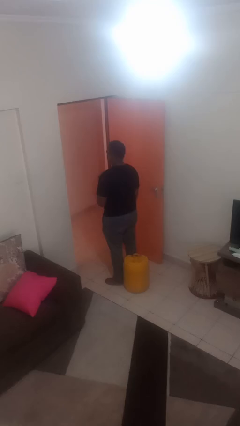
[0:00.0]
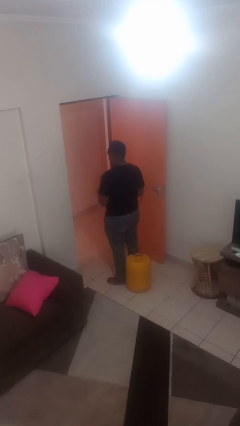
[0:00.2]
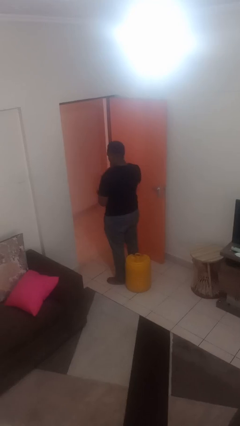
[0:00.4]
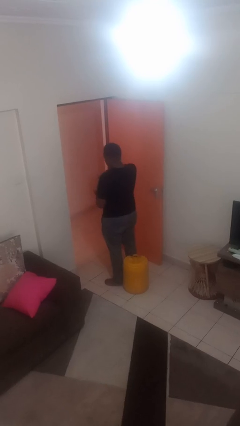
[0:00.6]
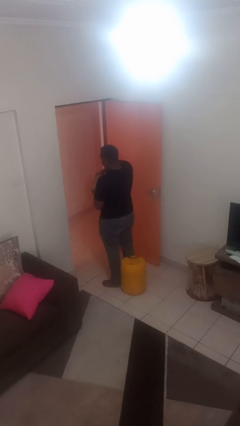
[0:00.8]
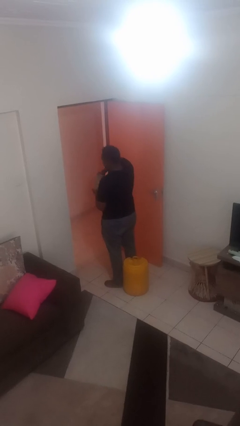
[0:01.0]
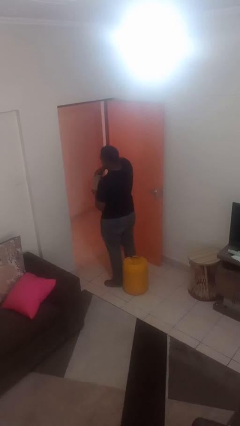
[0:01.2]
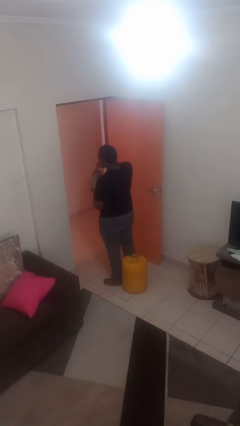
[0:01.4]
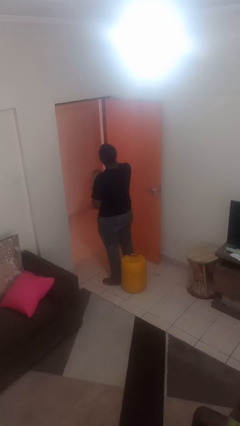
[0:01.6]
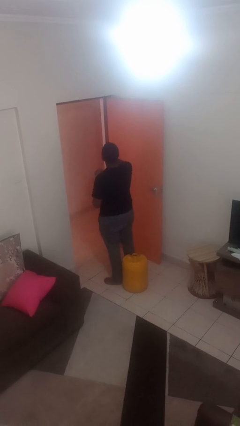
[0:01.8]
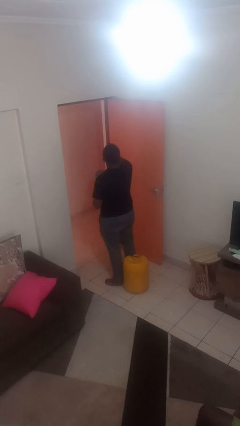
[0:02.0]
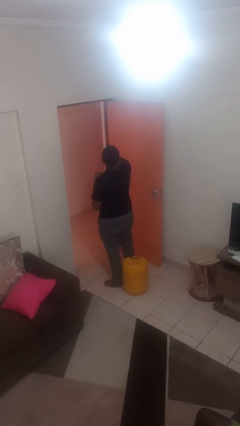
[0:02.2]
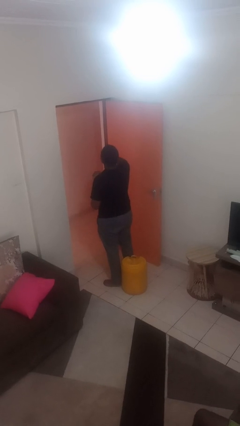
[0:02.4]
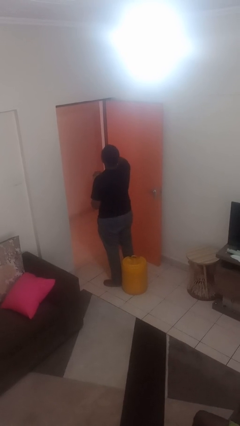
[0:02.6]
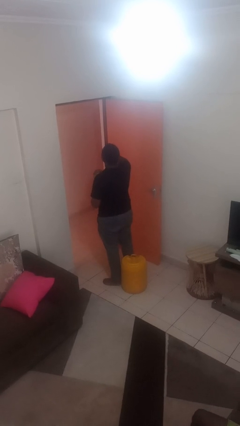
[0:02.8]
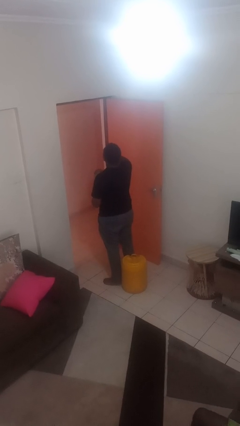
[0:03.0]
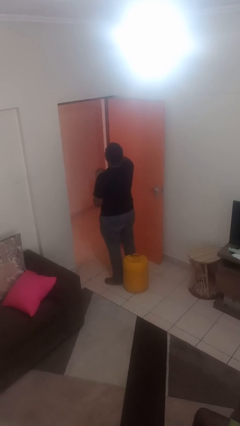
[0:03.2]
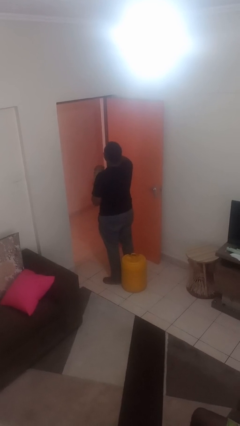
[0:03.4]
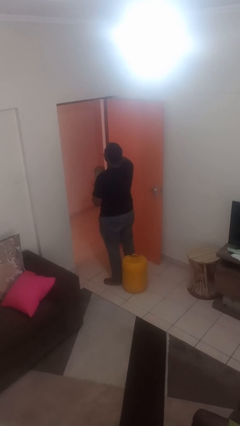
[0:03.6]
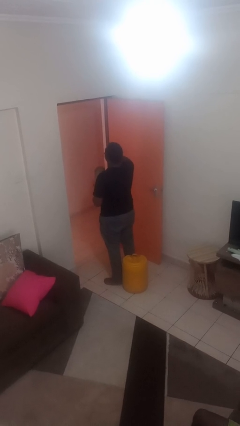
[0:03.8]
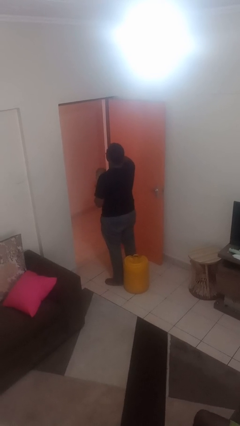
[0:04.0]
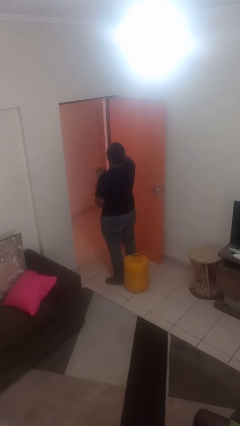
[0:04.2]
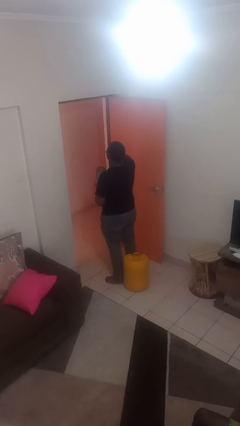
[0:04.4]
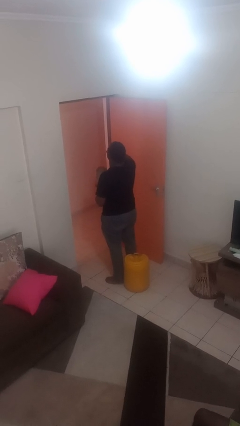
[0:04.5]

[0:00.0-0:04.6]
person eats snack from bag

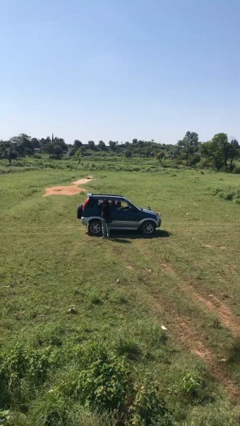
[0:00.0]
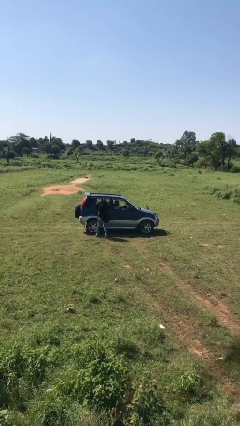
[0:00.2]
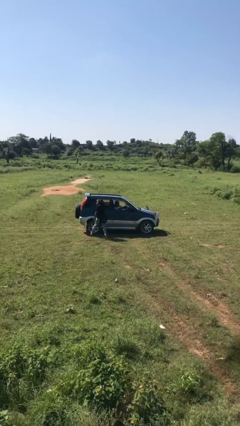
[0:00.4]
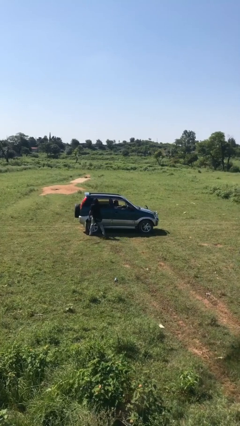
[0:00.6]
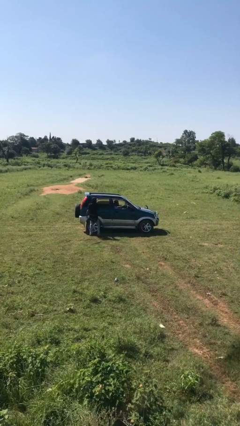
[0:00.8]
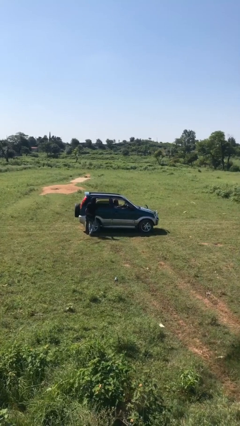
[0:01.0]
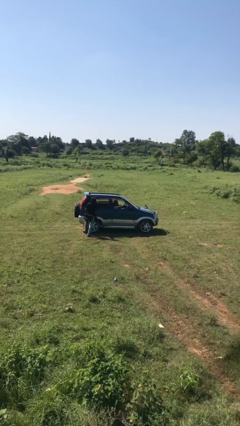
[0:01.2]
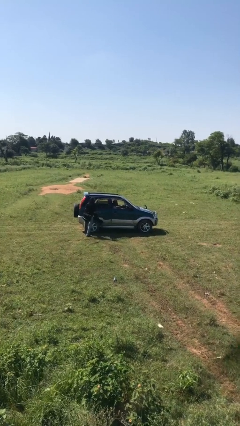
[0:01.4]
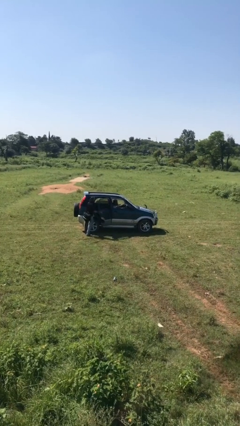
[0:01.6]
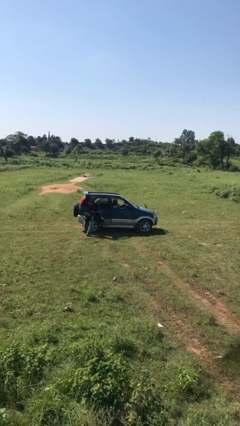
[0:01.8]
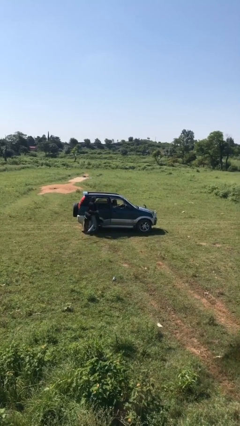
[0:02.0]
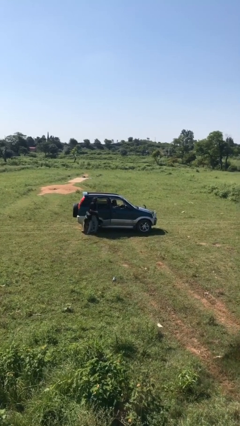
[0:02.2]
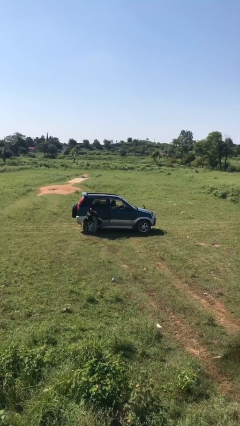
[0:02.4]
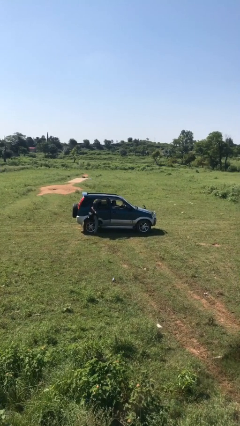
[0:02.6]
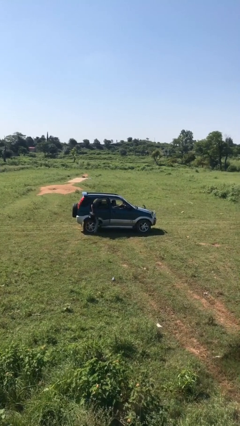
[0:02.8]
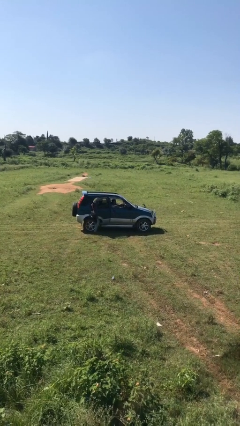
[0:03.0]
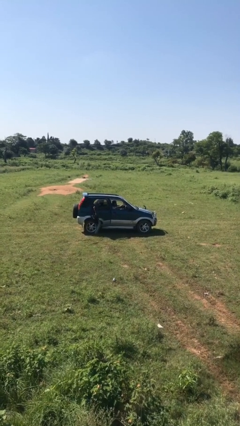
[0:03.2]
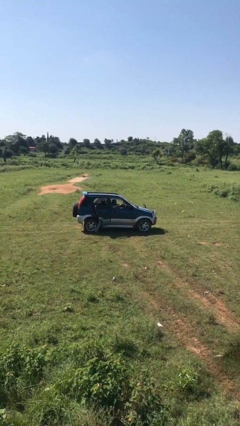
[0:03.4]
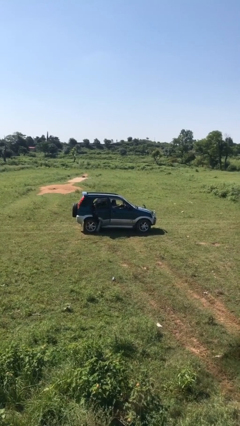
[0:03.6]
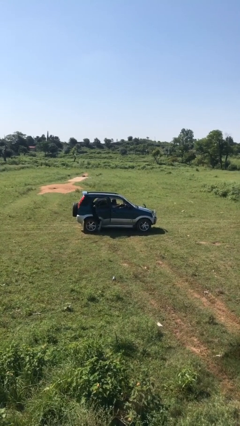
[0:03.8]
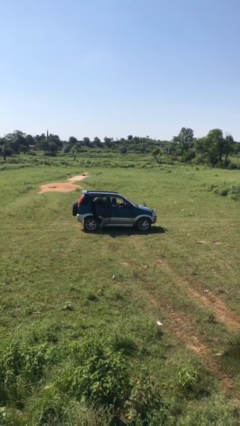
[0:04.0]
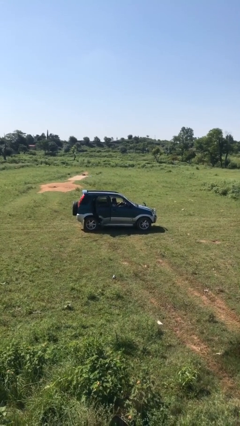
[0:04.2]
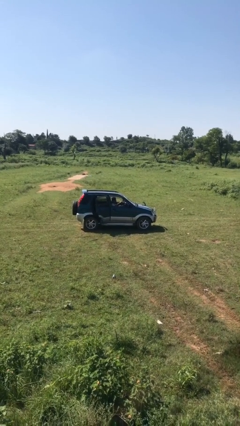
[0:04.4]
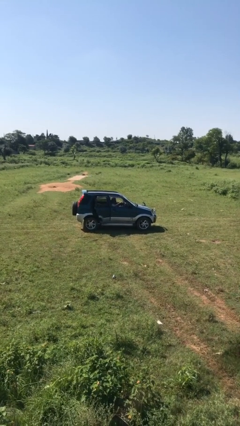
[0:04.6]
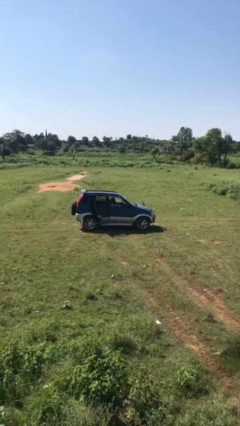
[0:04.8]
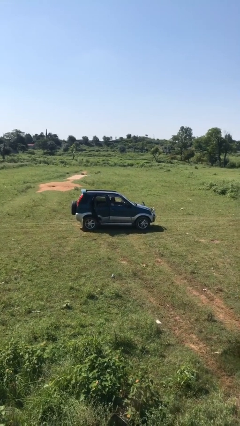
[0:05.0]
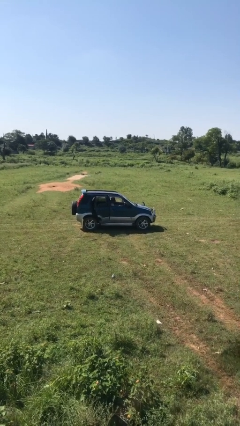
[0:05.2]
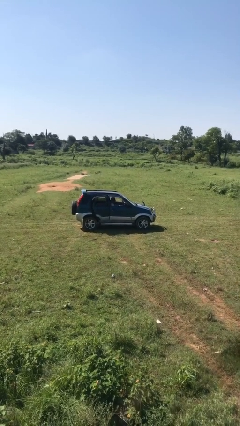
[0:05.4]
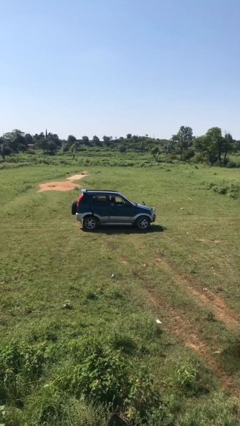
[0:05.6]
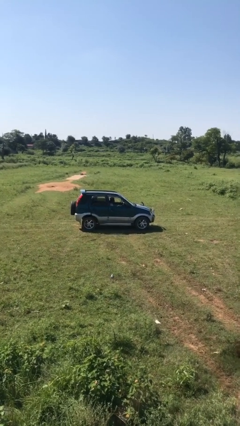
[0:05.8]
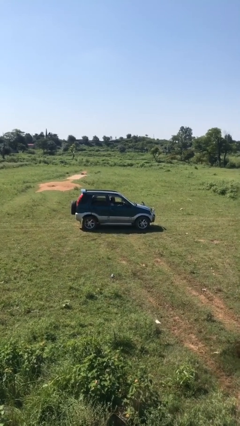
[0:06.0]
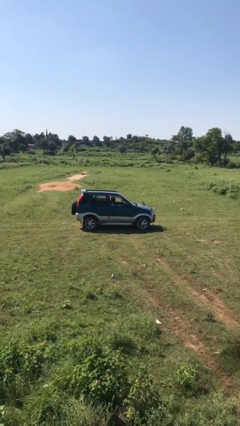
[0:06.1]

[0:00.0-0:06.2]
car picks up person

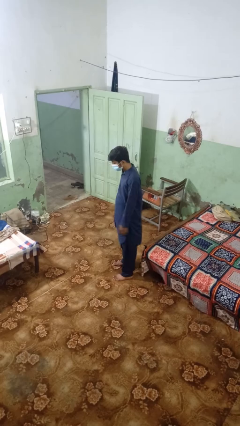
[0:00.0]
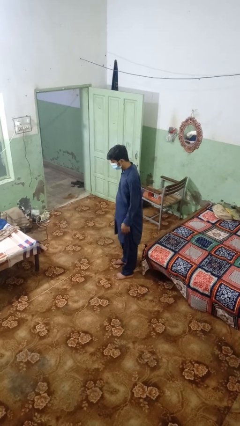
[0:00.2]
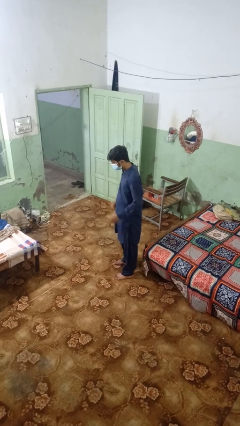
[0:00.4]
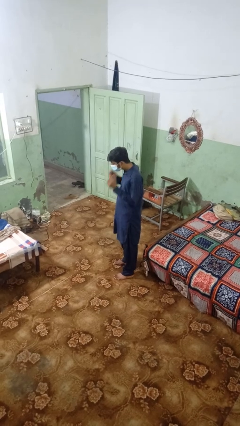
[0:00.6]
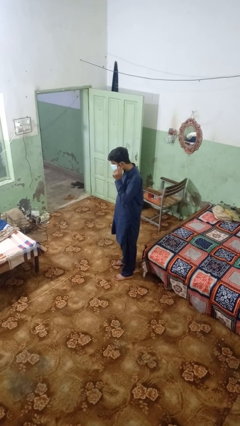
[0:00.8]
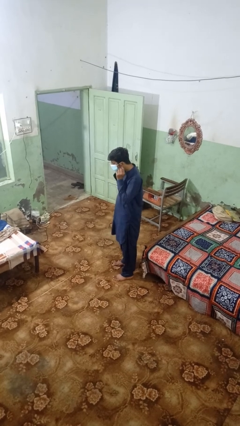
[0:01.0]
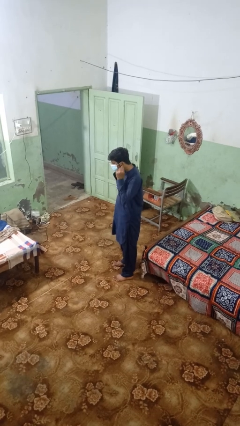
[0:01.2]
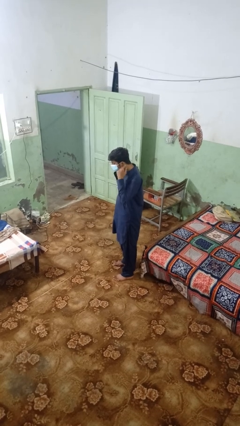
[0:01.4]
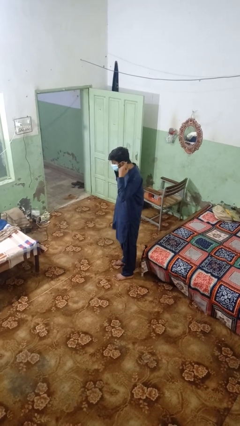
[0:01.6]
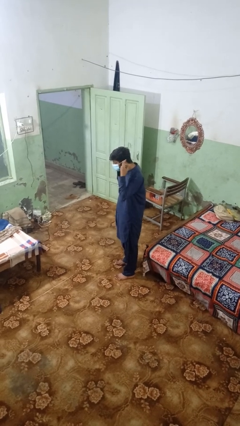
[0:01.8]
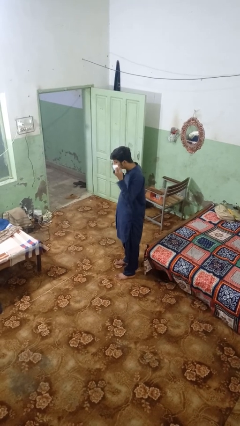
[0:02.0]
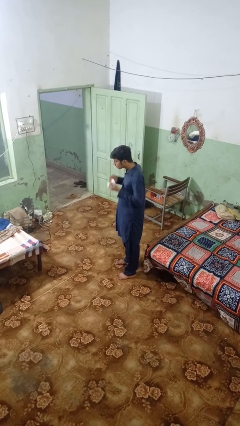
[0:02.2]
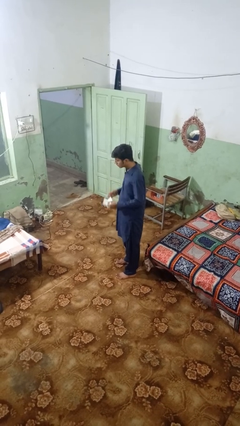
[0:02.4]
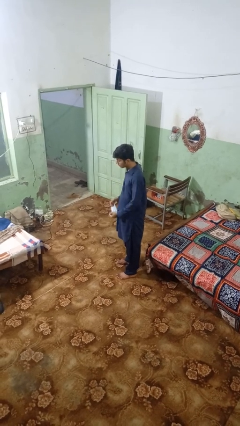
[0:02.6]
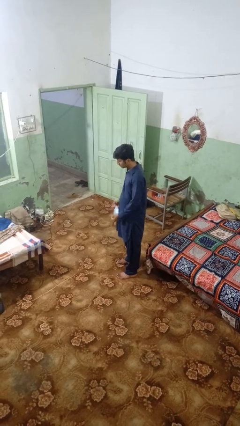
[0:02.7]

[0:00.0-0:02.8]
person takes off facemask

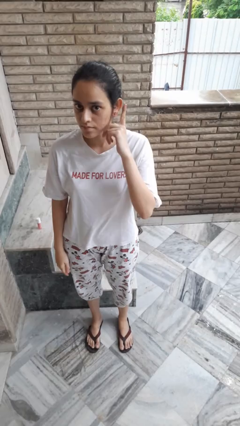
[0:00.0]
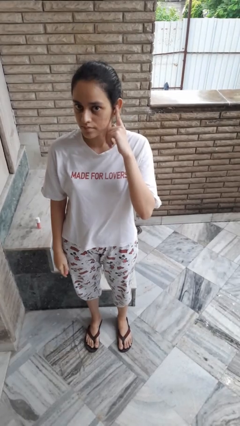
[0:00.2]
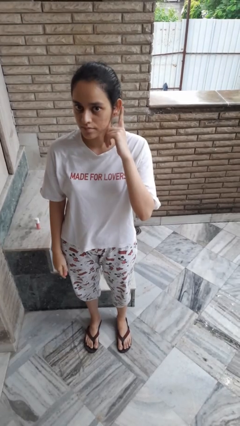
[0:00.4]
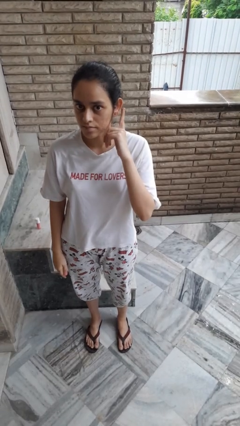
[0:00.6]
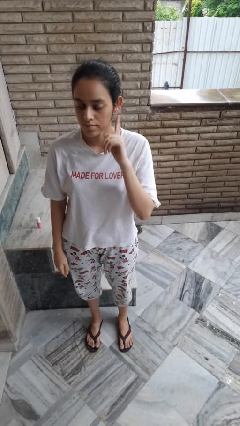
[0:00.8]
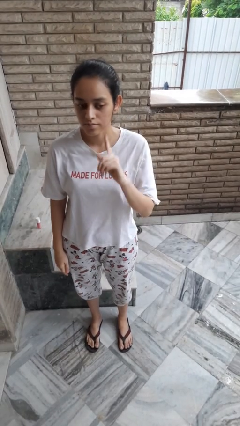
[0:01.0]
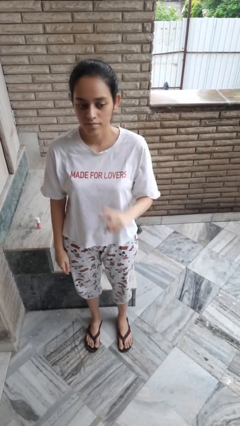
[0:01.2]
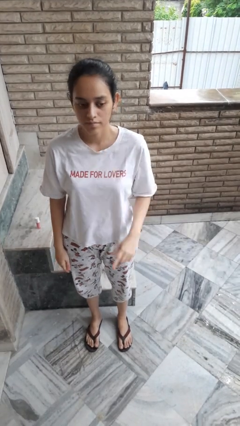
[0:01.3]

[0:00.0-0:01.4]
person gestures listen closely

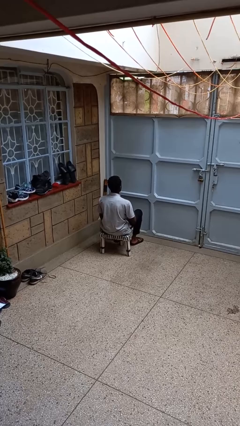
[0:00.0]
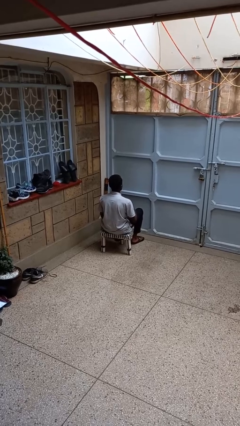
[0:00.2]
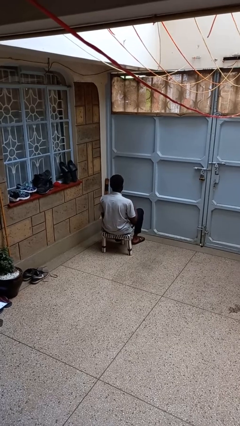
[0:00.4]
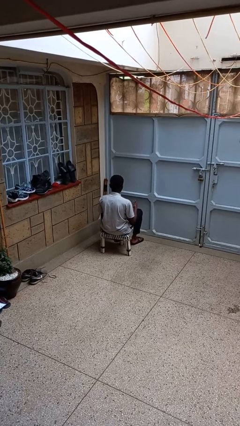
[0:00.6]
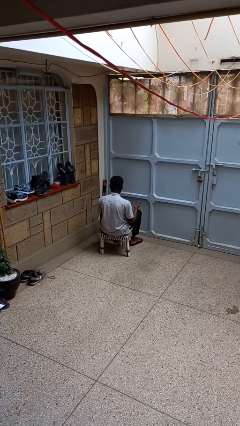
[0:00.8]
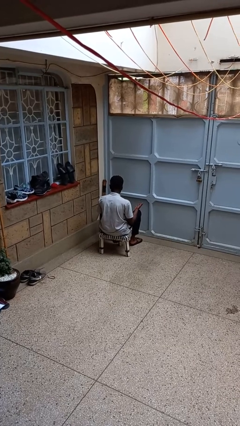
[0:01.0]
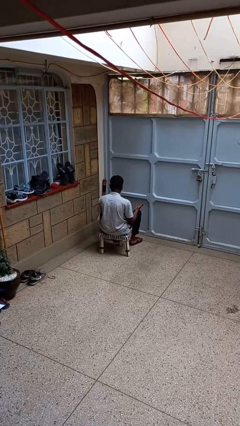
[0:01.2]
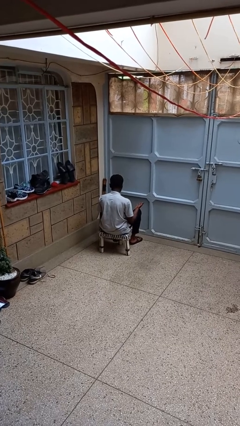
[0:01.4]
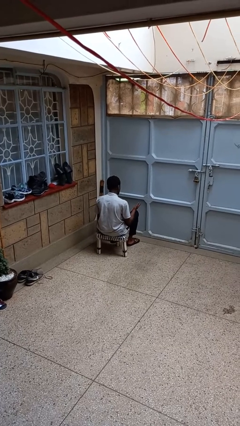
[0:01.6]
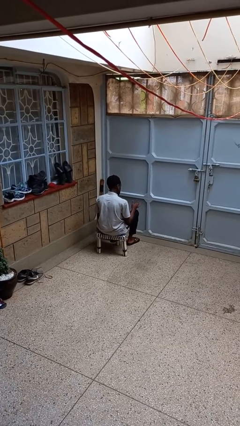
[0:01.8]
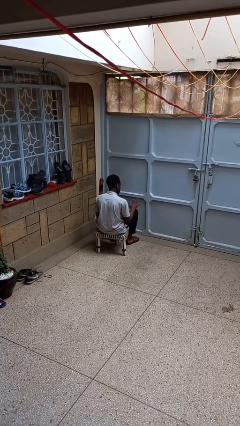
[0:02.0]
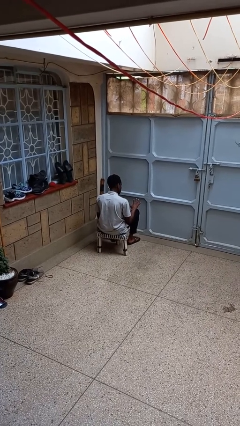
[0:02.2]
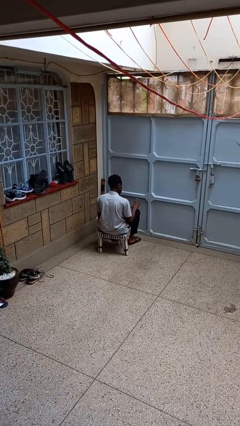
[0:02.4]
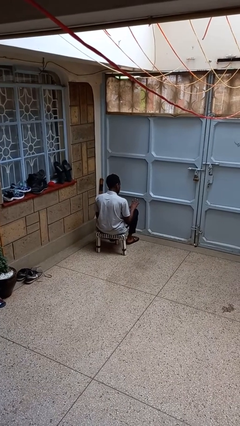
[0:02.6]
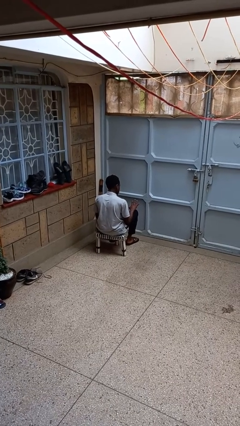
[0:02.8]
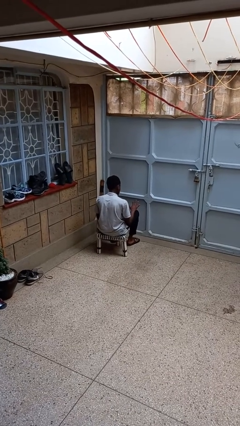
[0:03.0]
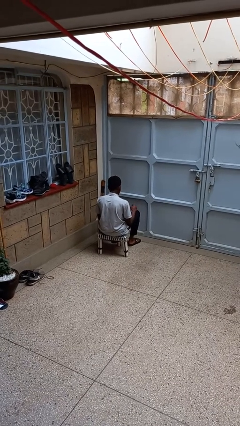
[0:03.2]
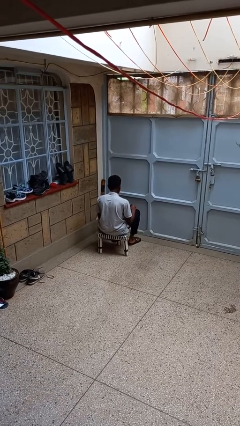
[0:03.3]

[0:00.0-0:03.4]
person looks at hands in lap
